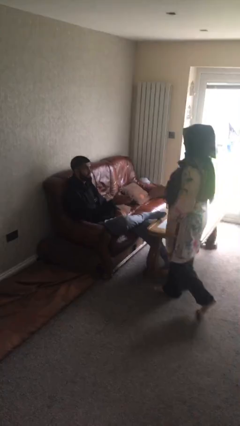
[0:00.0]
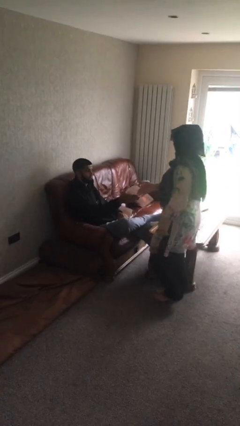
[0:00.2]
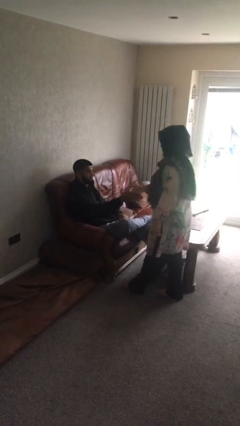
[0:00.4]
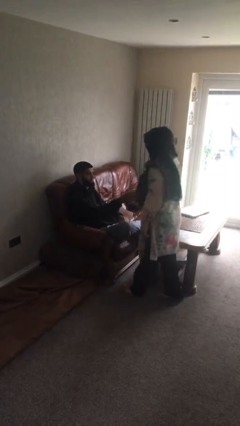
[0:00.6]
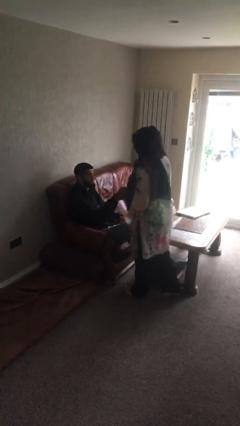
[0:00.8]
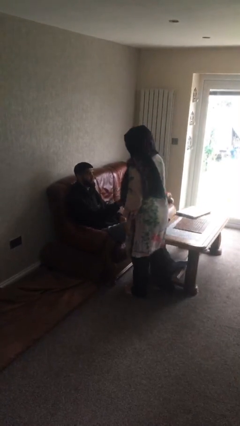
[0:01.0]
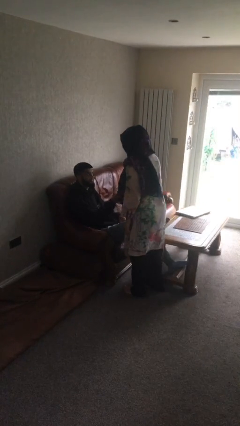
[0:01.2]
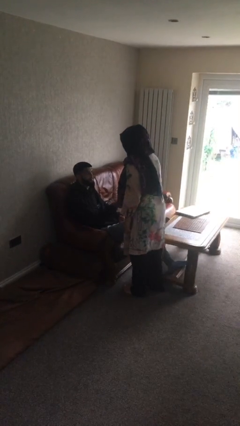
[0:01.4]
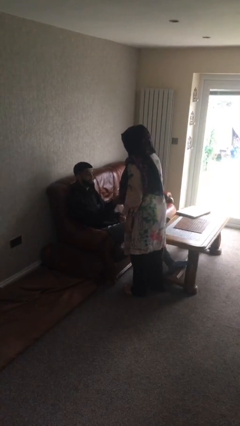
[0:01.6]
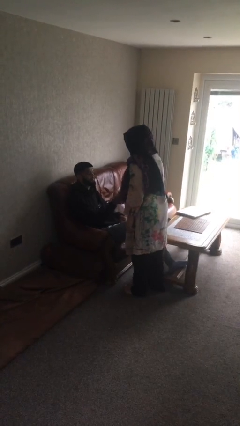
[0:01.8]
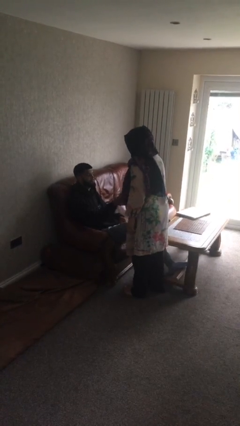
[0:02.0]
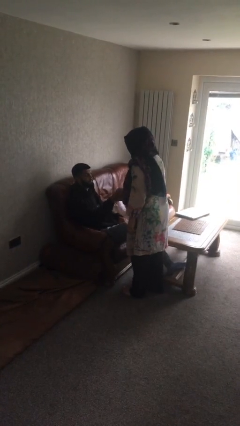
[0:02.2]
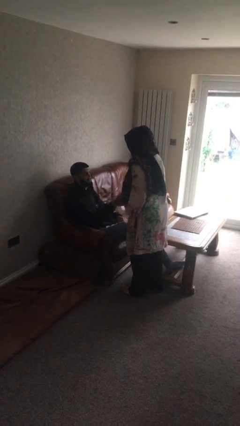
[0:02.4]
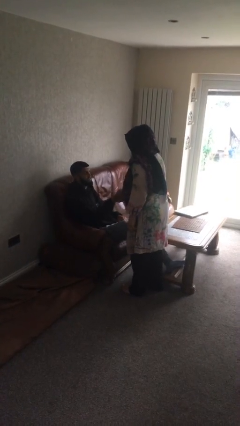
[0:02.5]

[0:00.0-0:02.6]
person shakes hand

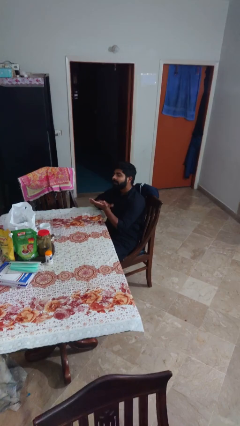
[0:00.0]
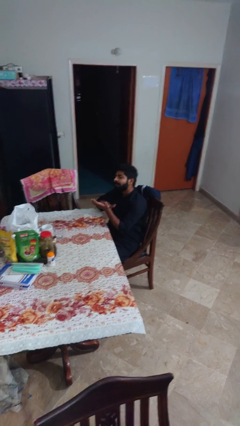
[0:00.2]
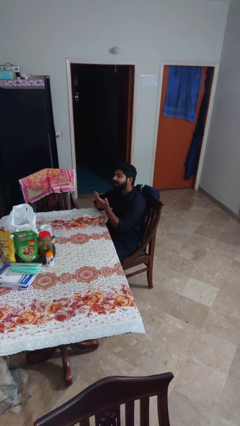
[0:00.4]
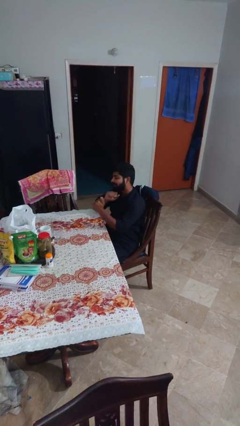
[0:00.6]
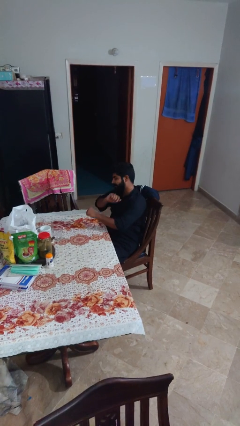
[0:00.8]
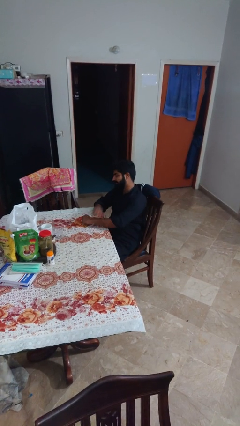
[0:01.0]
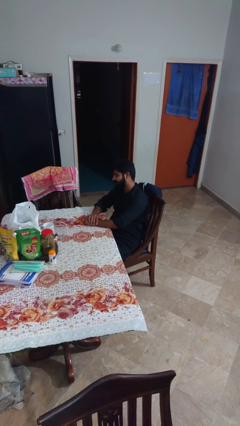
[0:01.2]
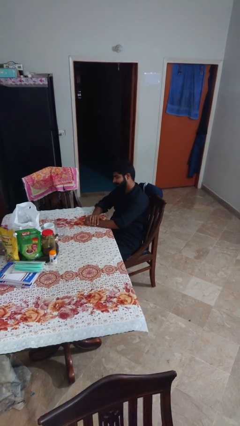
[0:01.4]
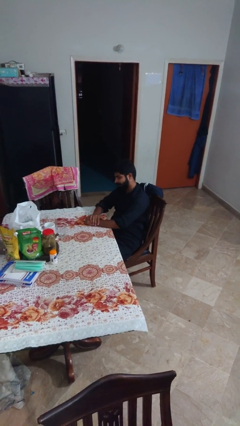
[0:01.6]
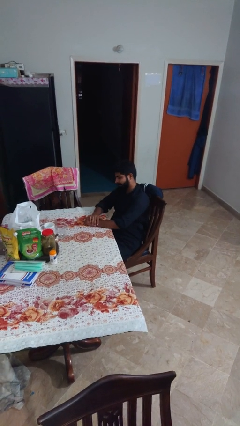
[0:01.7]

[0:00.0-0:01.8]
person claps hands

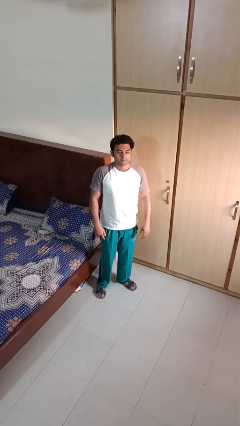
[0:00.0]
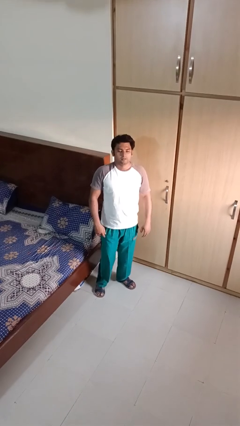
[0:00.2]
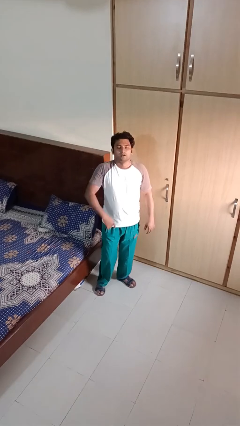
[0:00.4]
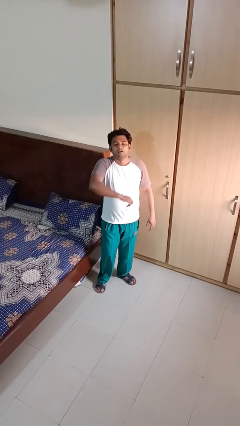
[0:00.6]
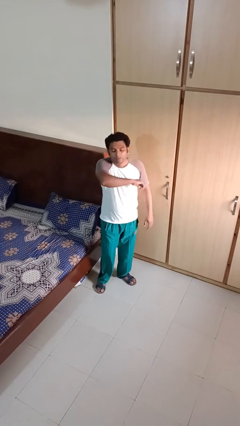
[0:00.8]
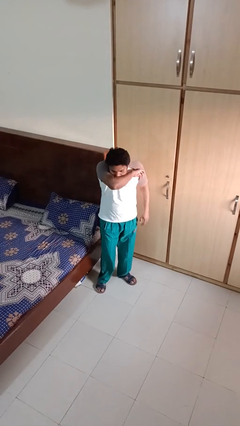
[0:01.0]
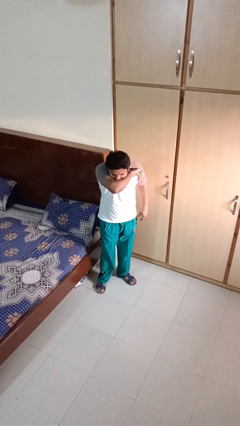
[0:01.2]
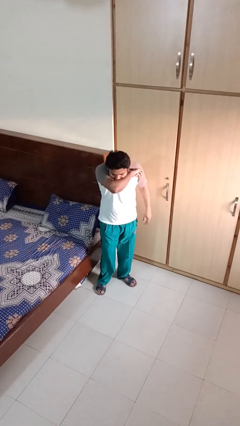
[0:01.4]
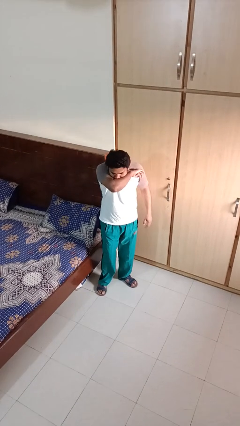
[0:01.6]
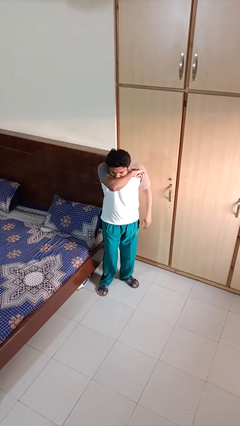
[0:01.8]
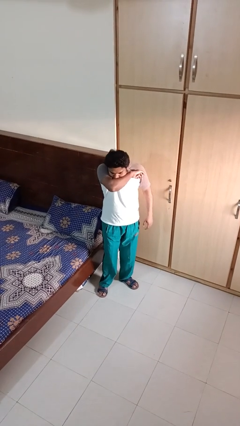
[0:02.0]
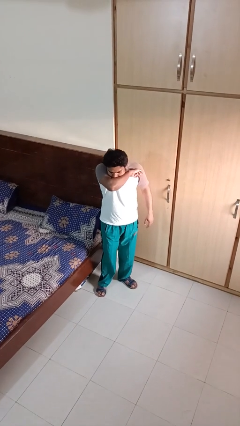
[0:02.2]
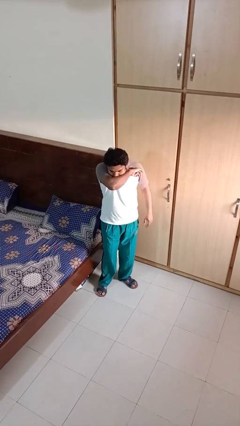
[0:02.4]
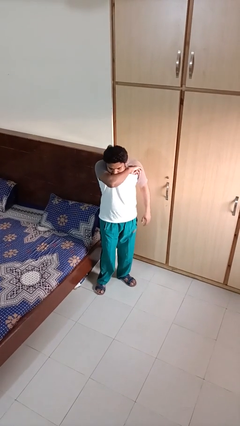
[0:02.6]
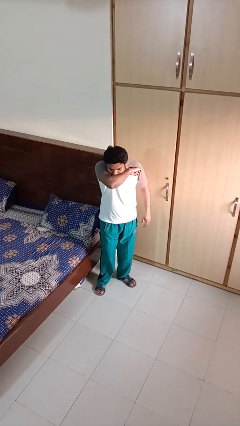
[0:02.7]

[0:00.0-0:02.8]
person sneezes into arm

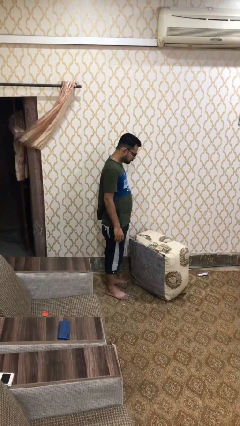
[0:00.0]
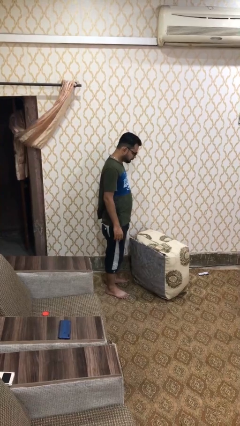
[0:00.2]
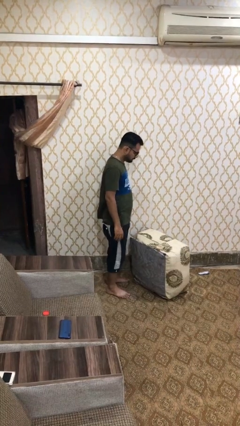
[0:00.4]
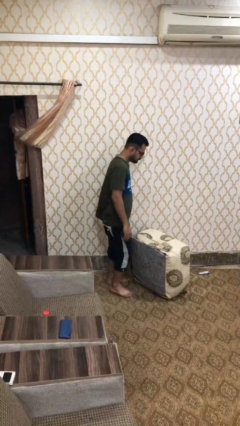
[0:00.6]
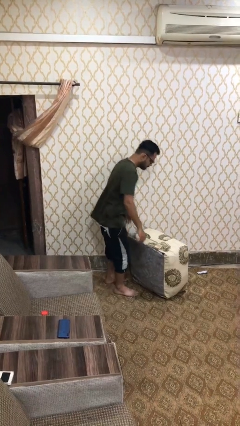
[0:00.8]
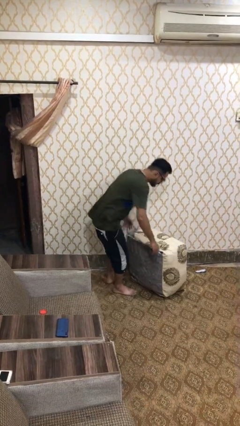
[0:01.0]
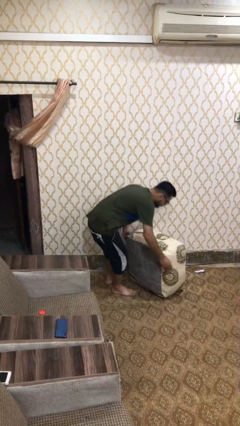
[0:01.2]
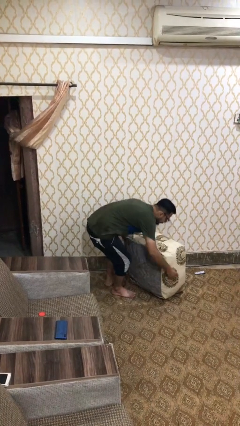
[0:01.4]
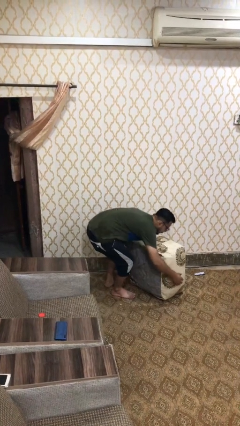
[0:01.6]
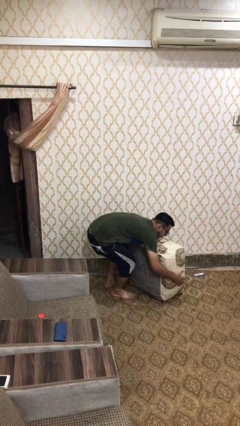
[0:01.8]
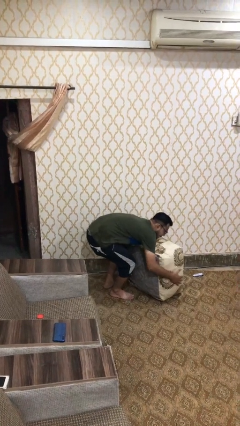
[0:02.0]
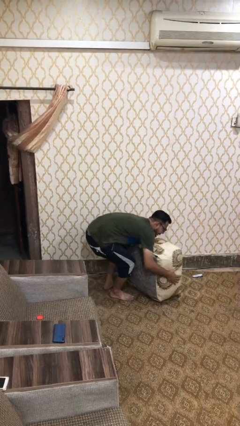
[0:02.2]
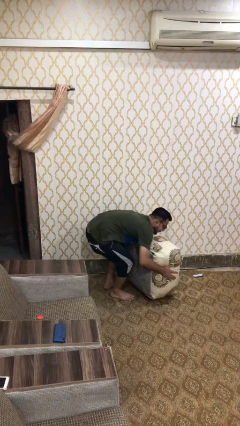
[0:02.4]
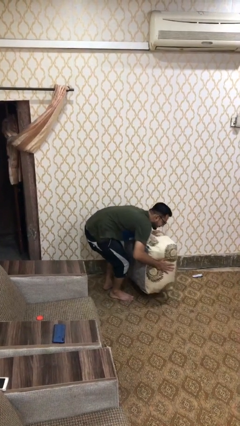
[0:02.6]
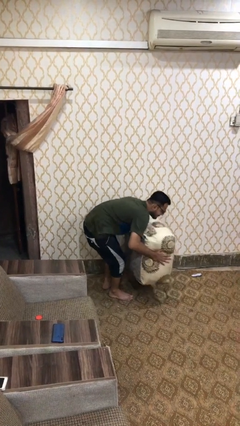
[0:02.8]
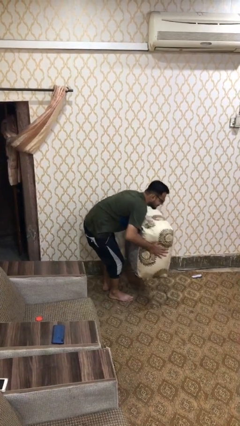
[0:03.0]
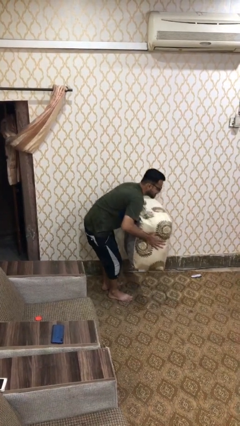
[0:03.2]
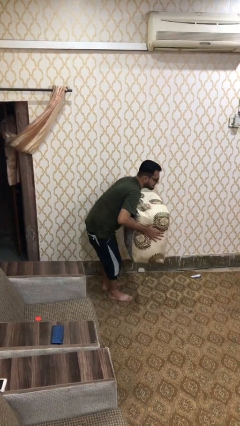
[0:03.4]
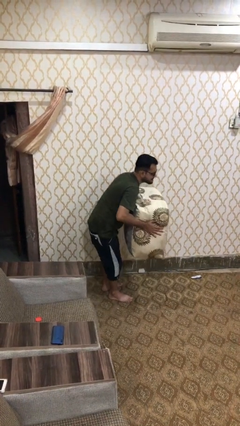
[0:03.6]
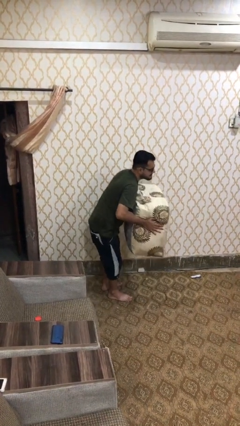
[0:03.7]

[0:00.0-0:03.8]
person picks up object from floor

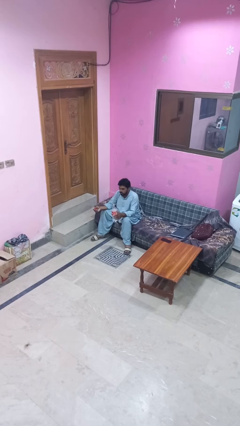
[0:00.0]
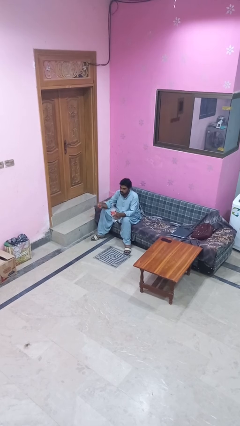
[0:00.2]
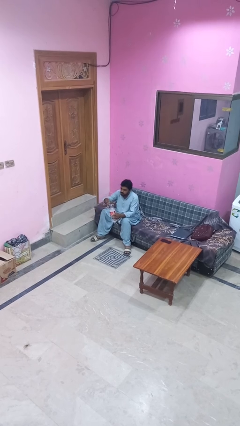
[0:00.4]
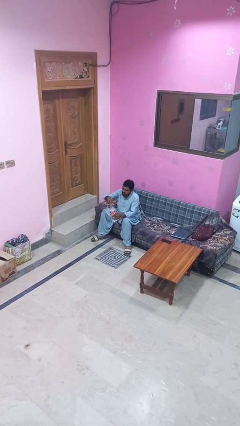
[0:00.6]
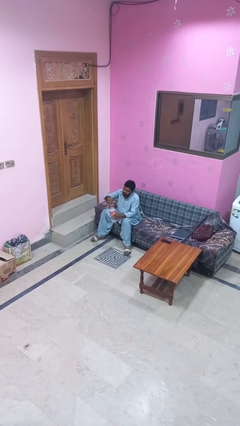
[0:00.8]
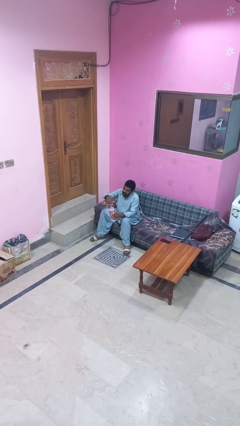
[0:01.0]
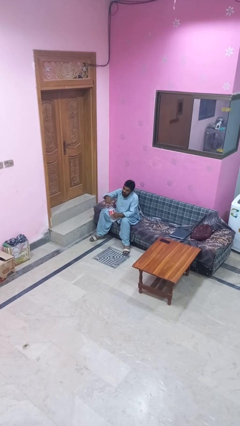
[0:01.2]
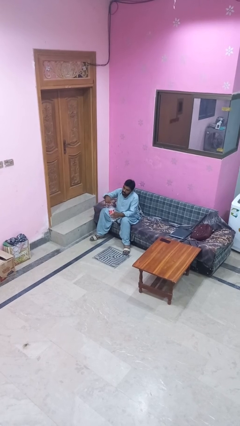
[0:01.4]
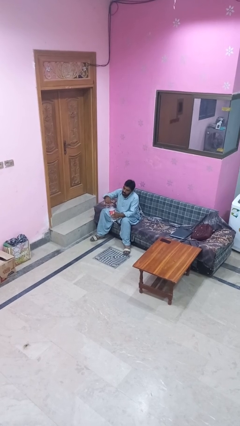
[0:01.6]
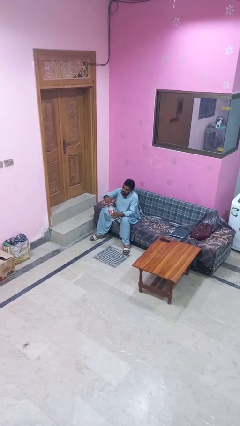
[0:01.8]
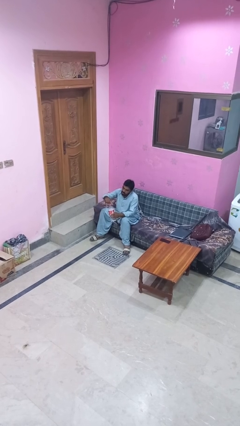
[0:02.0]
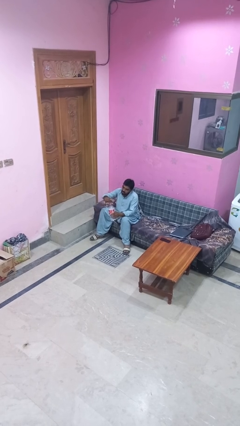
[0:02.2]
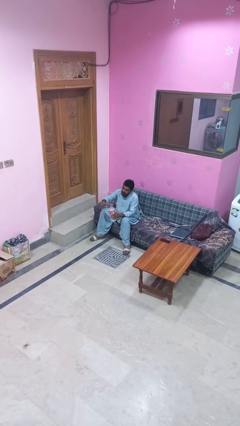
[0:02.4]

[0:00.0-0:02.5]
person screws lid to bottle

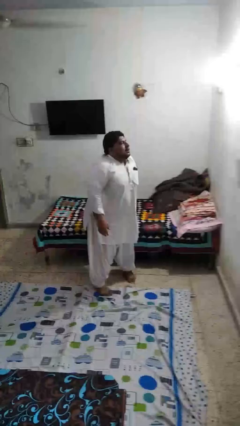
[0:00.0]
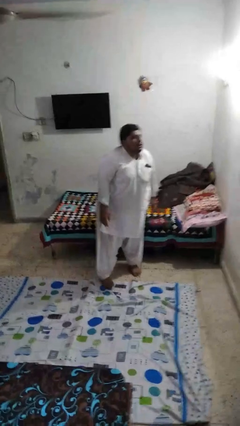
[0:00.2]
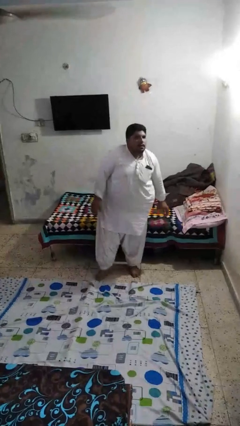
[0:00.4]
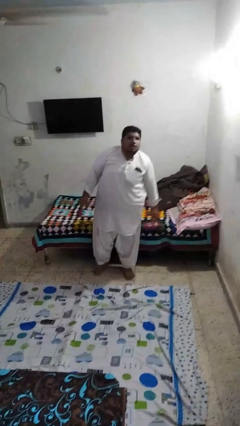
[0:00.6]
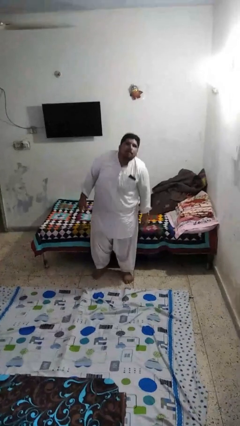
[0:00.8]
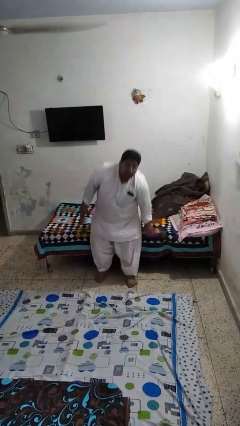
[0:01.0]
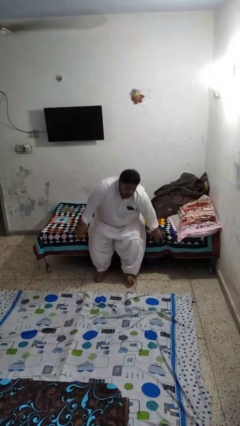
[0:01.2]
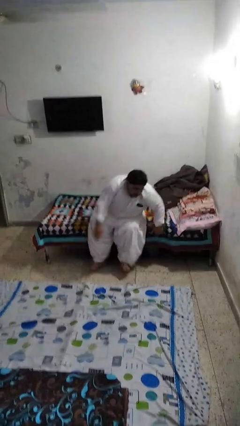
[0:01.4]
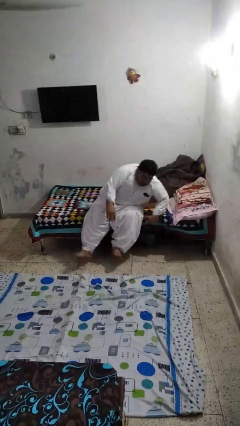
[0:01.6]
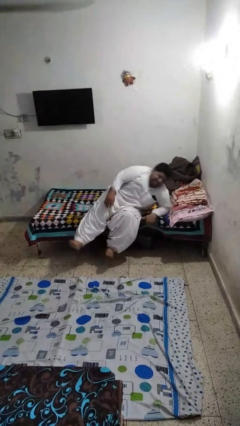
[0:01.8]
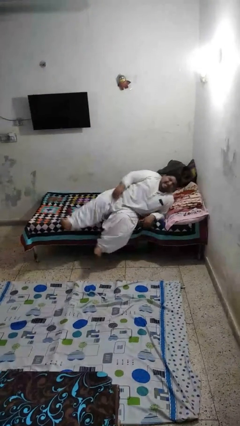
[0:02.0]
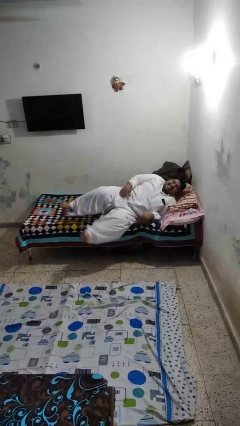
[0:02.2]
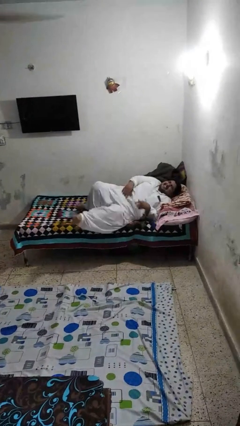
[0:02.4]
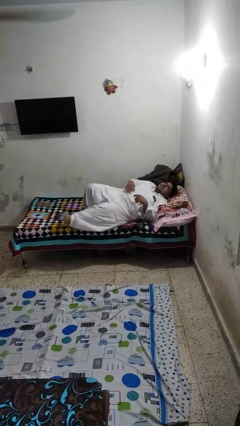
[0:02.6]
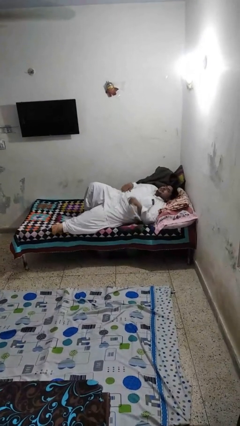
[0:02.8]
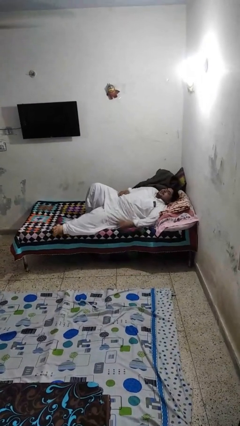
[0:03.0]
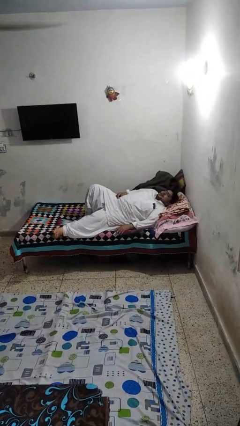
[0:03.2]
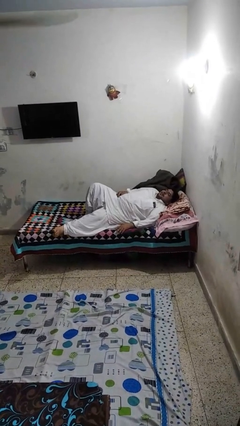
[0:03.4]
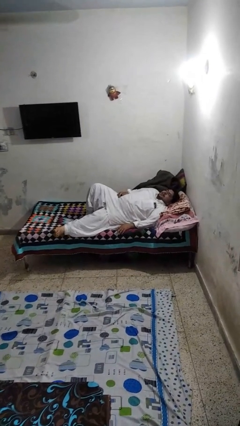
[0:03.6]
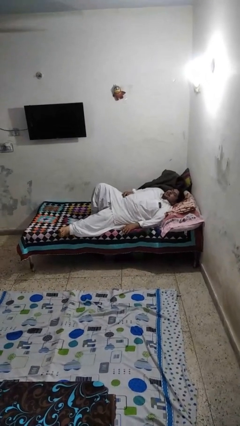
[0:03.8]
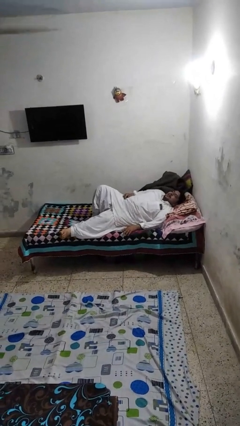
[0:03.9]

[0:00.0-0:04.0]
person lies down on bed
